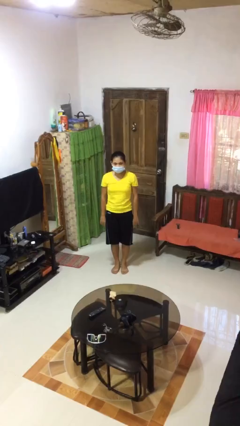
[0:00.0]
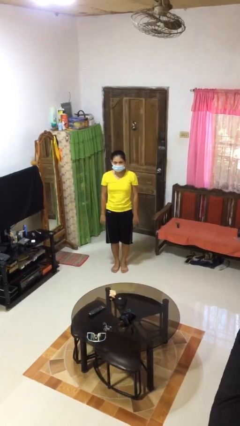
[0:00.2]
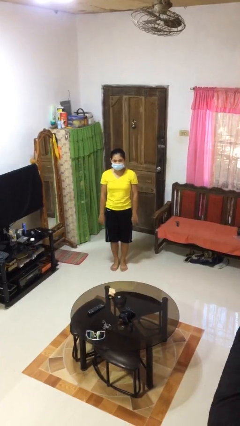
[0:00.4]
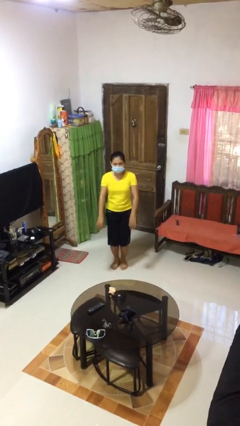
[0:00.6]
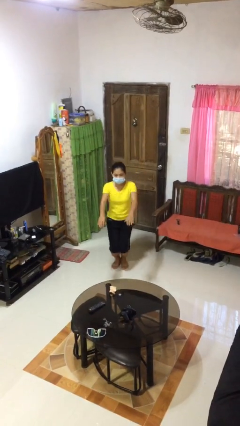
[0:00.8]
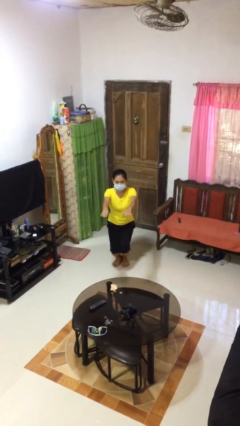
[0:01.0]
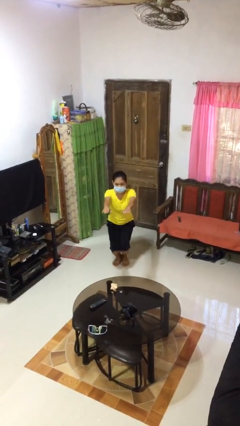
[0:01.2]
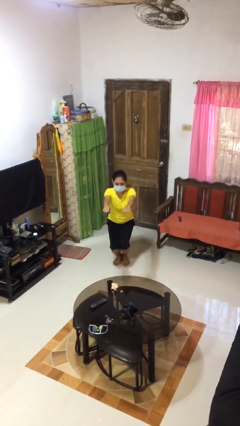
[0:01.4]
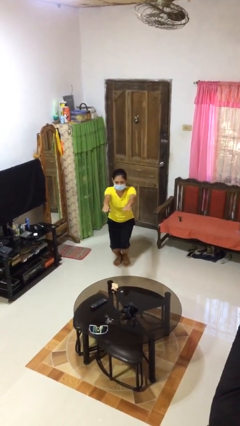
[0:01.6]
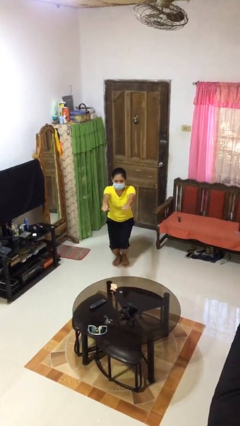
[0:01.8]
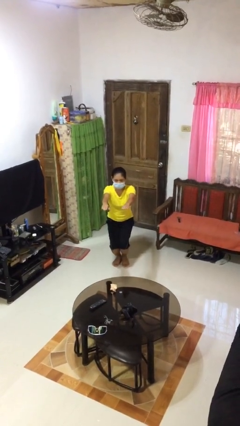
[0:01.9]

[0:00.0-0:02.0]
person squats

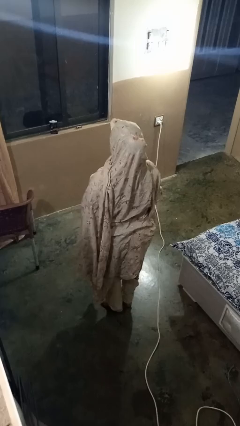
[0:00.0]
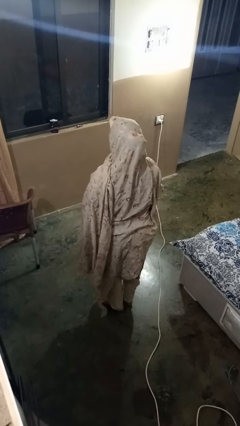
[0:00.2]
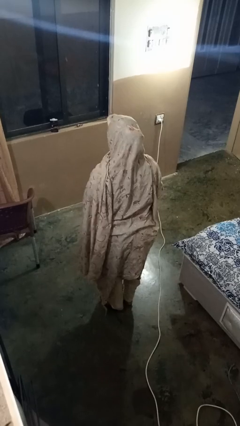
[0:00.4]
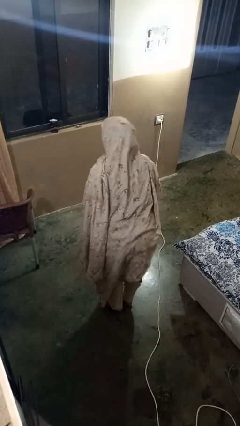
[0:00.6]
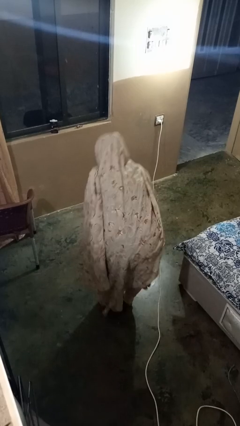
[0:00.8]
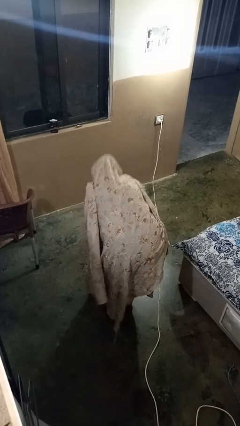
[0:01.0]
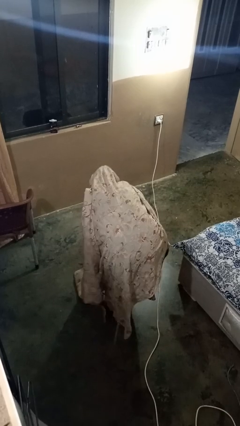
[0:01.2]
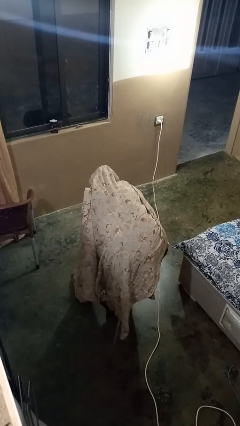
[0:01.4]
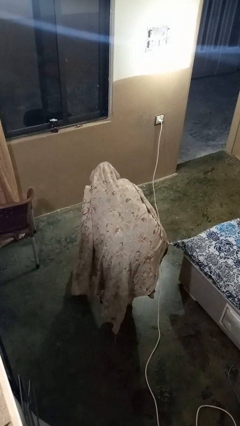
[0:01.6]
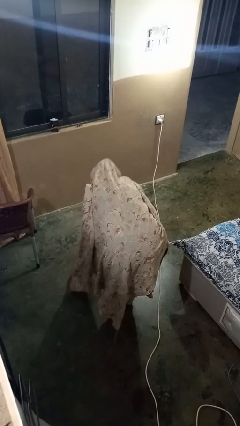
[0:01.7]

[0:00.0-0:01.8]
person bows

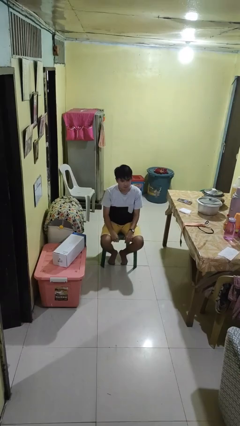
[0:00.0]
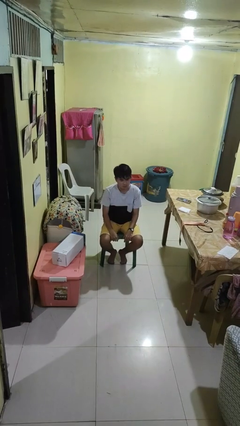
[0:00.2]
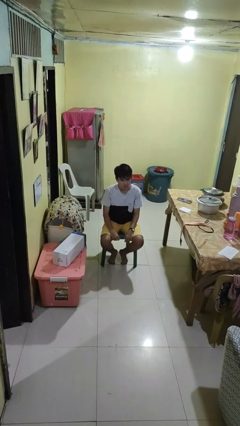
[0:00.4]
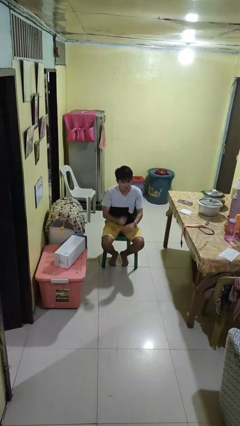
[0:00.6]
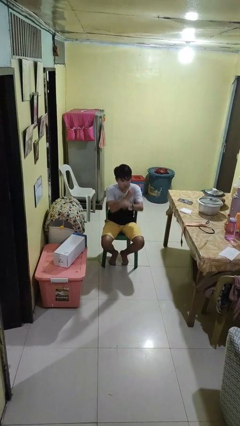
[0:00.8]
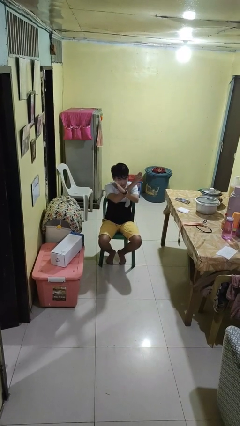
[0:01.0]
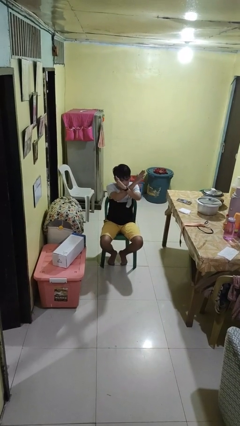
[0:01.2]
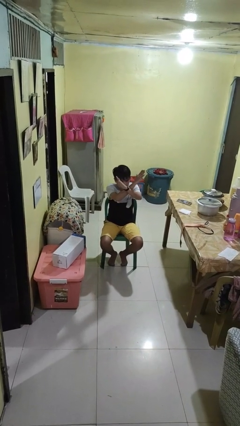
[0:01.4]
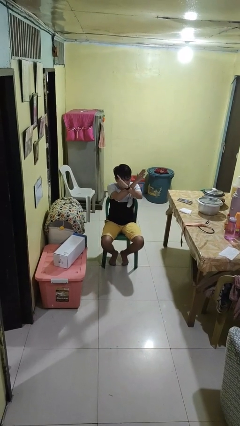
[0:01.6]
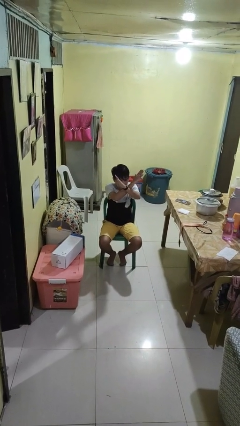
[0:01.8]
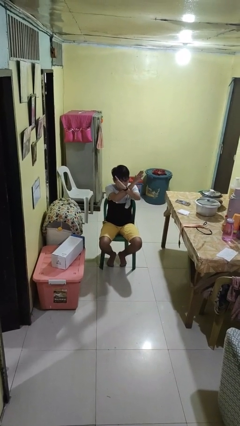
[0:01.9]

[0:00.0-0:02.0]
person gestures arms x

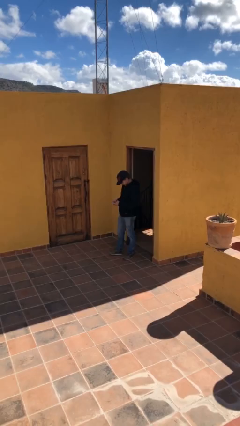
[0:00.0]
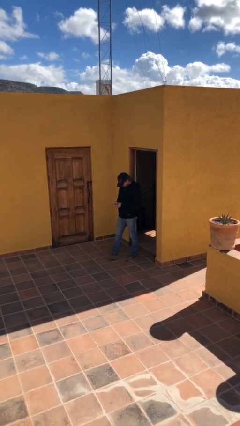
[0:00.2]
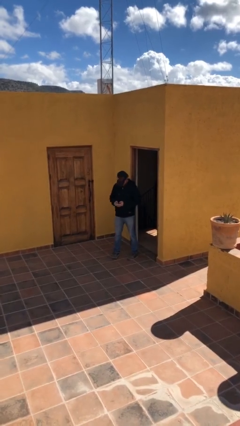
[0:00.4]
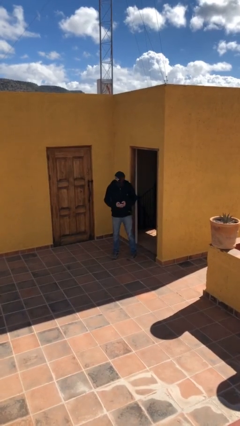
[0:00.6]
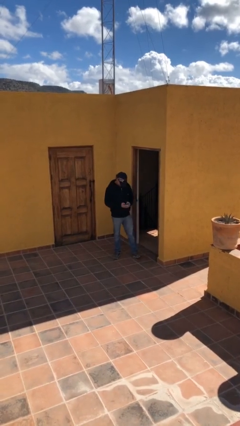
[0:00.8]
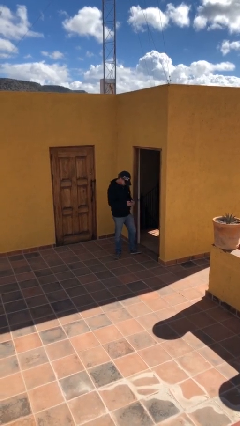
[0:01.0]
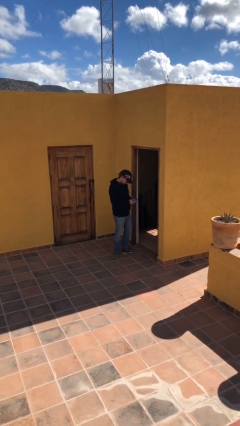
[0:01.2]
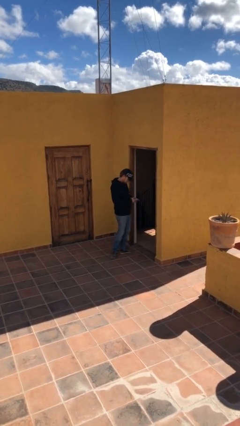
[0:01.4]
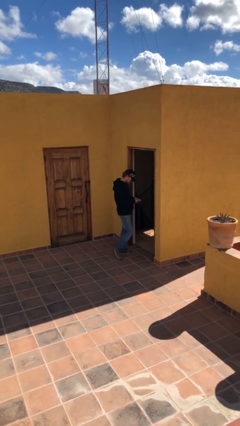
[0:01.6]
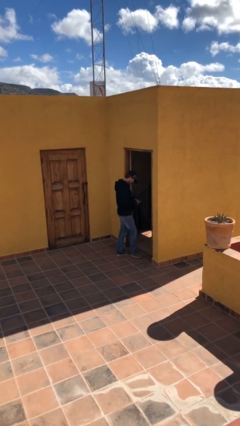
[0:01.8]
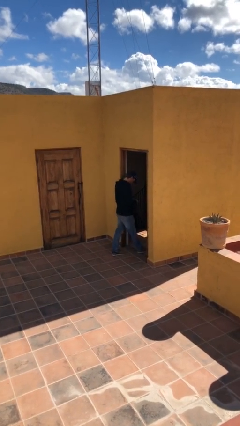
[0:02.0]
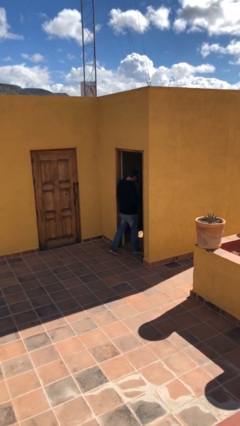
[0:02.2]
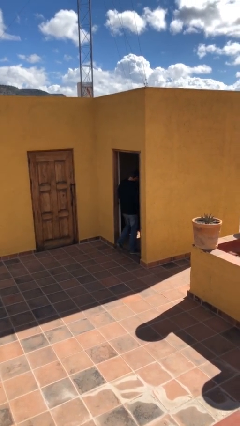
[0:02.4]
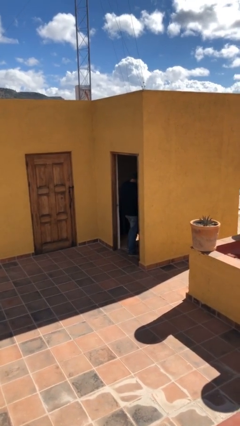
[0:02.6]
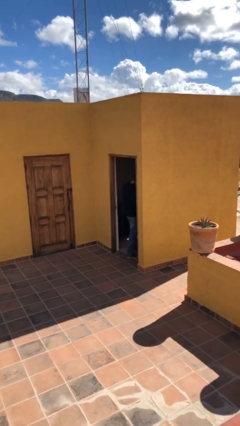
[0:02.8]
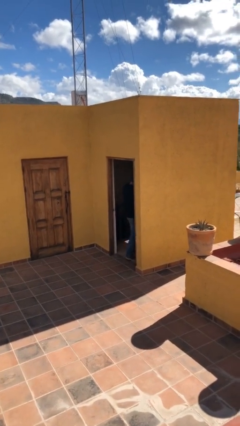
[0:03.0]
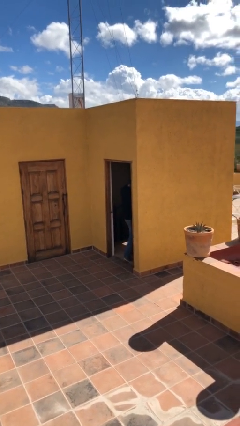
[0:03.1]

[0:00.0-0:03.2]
person exits scene through structure

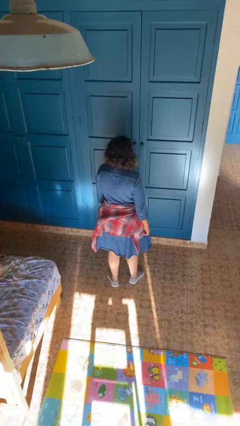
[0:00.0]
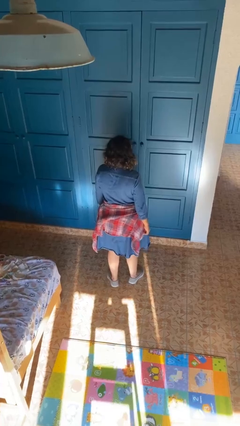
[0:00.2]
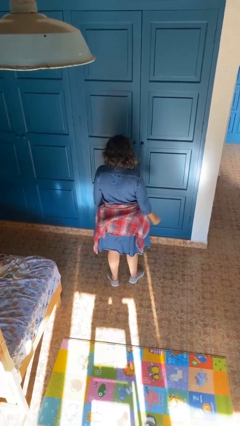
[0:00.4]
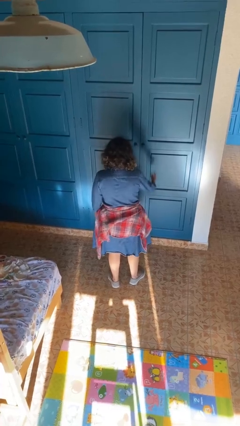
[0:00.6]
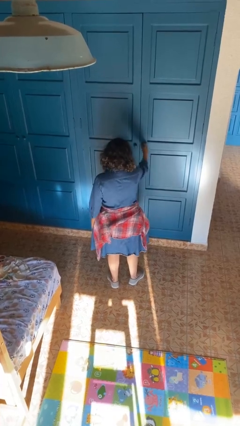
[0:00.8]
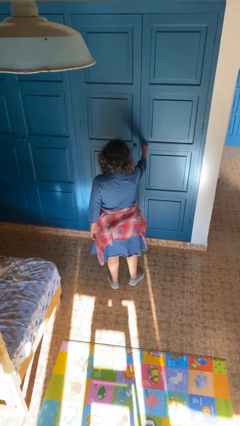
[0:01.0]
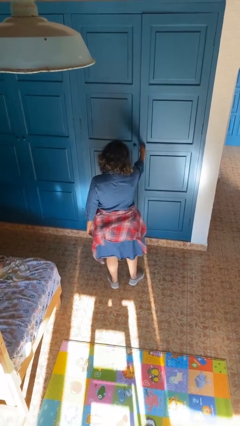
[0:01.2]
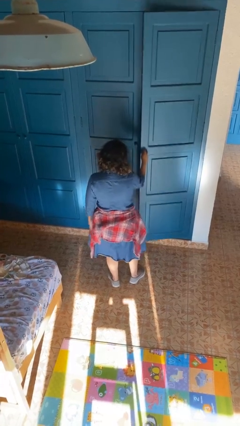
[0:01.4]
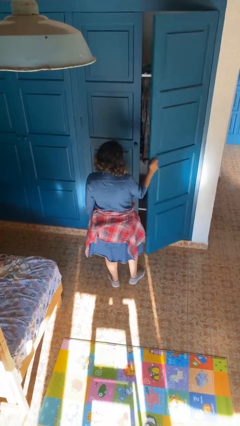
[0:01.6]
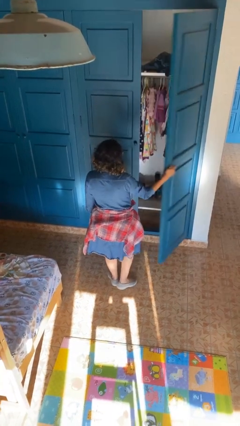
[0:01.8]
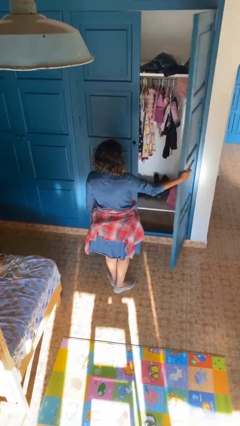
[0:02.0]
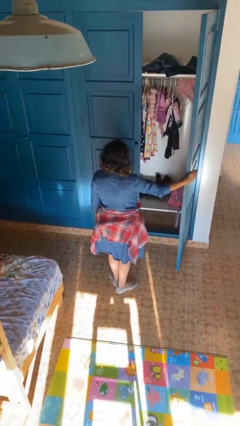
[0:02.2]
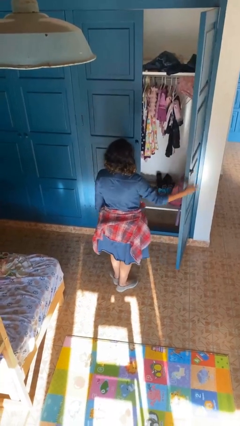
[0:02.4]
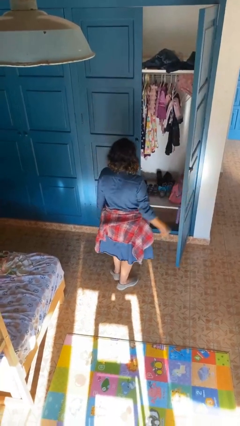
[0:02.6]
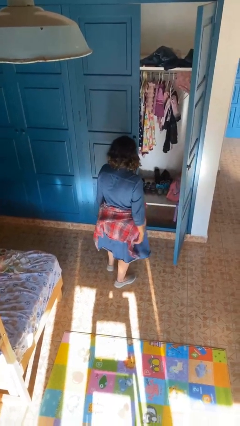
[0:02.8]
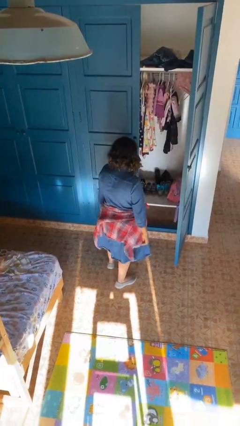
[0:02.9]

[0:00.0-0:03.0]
person opens closet door

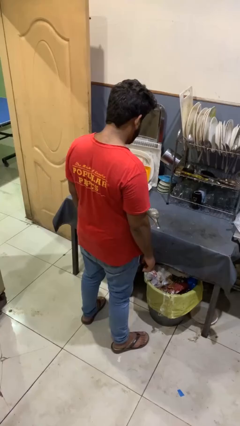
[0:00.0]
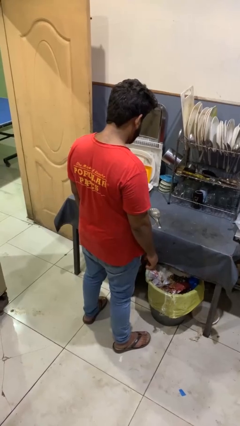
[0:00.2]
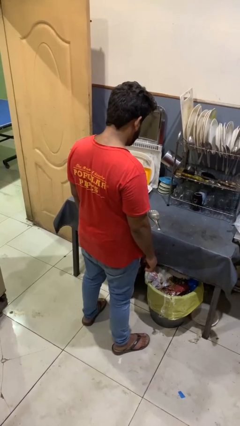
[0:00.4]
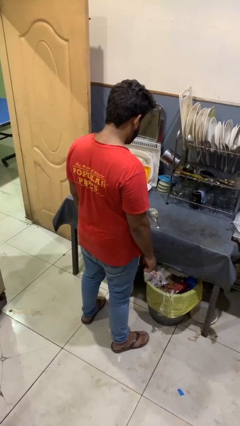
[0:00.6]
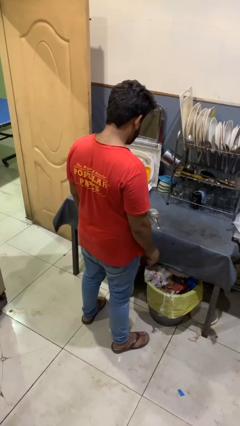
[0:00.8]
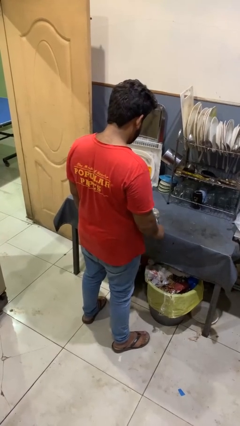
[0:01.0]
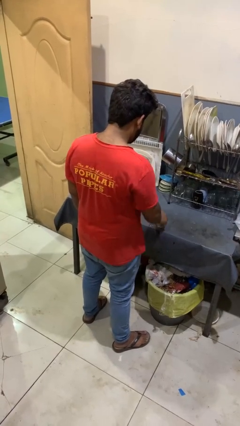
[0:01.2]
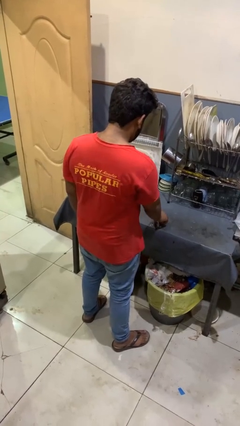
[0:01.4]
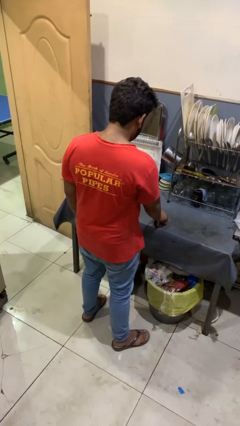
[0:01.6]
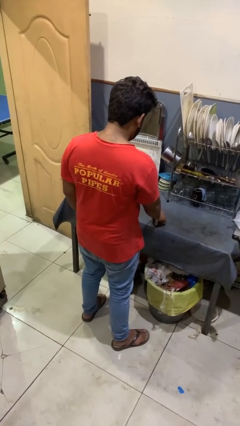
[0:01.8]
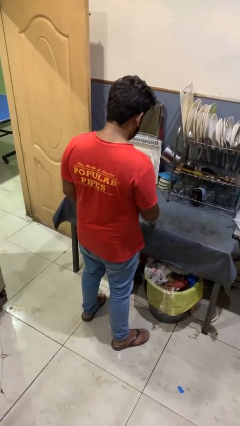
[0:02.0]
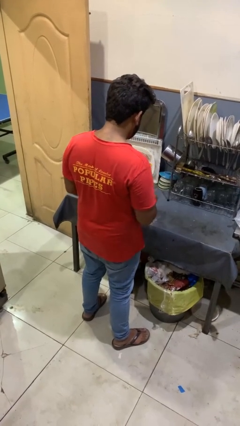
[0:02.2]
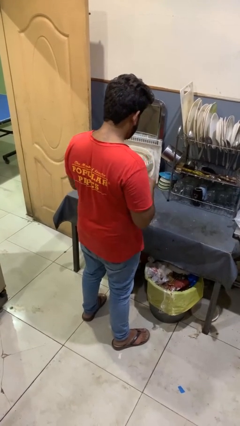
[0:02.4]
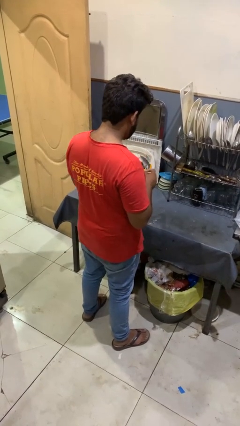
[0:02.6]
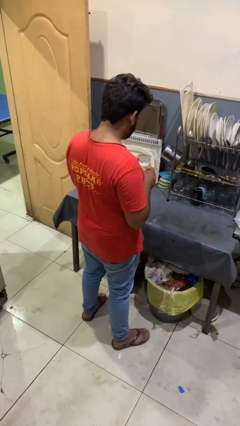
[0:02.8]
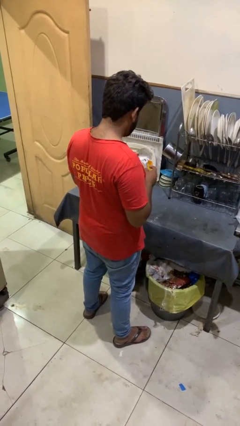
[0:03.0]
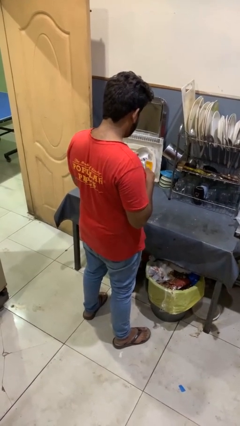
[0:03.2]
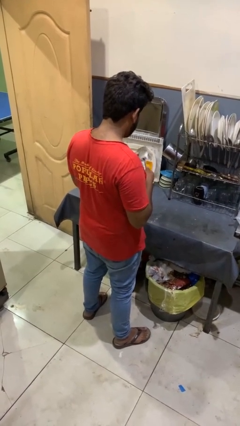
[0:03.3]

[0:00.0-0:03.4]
person picks up object from countertop

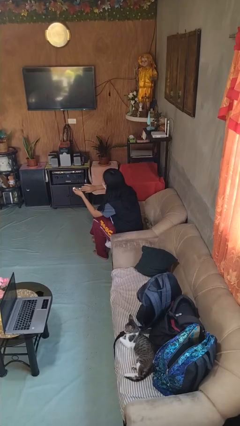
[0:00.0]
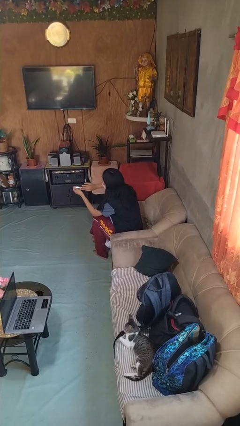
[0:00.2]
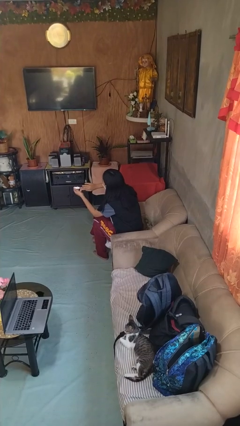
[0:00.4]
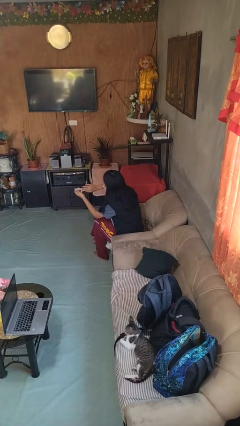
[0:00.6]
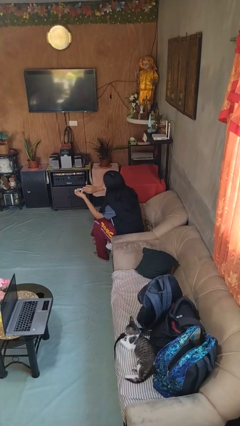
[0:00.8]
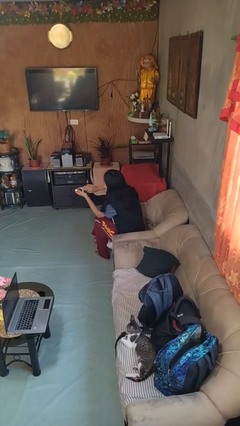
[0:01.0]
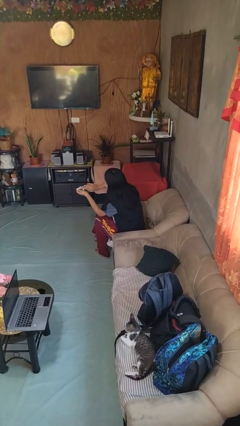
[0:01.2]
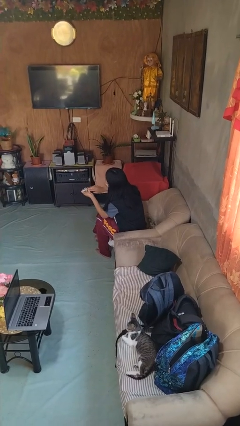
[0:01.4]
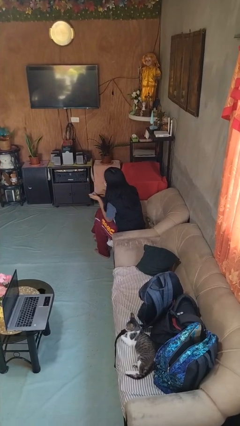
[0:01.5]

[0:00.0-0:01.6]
person clips fingernails

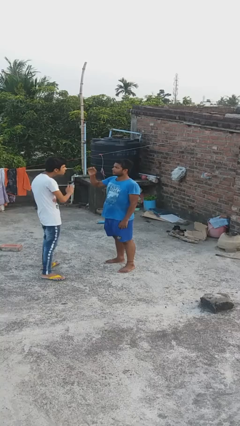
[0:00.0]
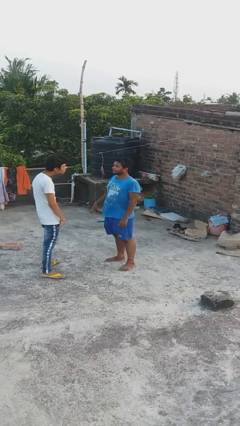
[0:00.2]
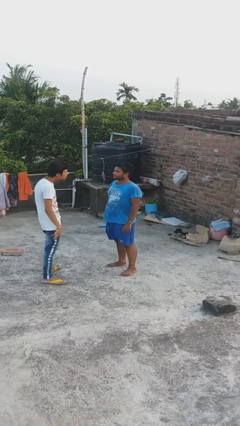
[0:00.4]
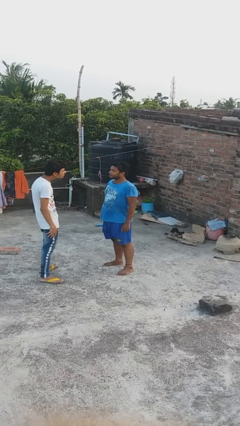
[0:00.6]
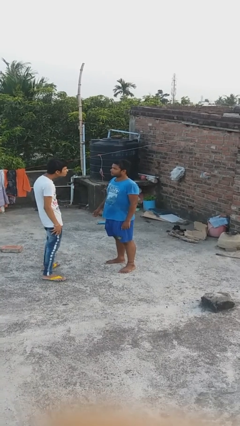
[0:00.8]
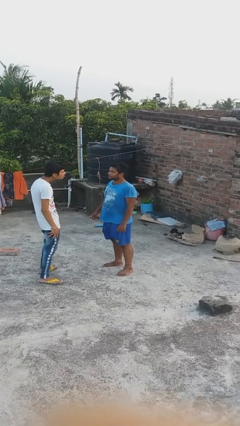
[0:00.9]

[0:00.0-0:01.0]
person highfives hand